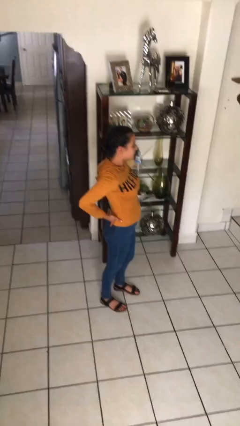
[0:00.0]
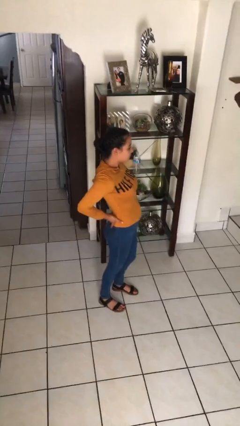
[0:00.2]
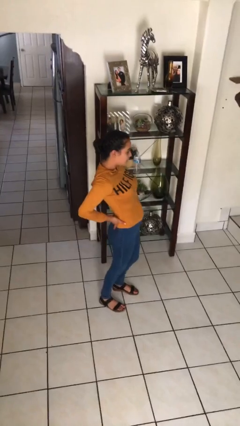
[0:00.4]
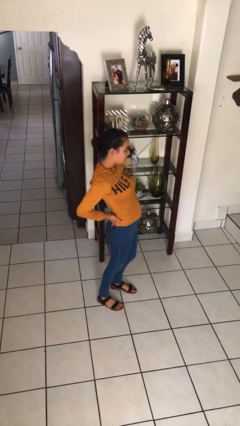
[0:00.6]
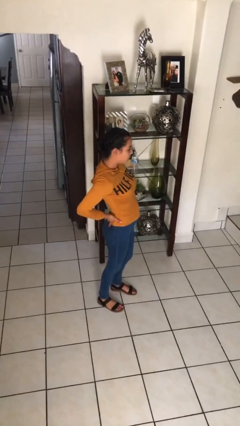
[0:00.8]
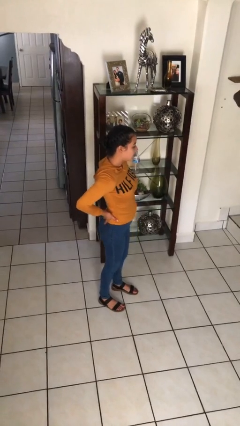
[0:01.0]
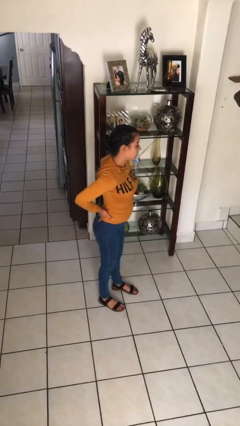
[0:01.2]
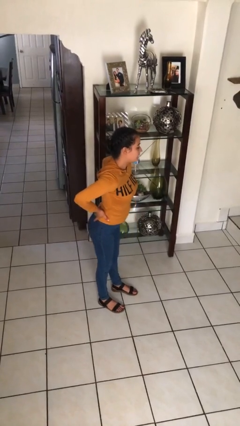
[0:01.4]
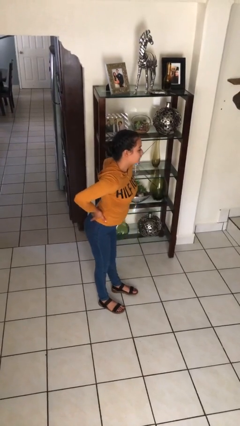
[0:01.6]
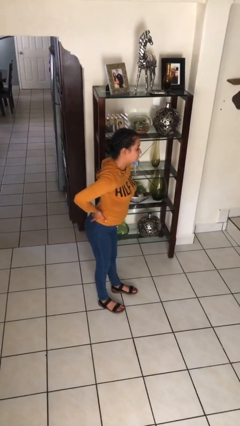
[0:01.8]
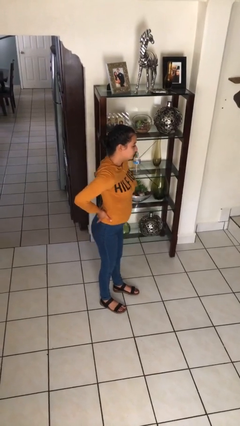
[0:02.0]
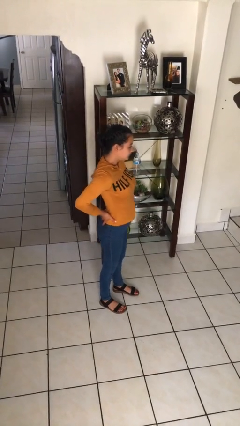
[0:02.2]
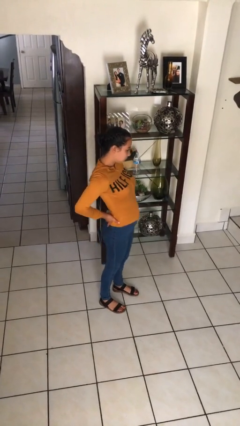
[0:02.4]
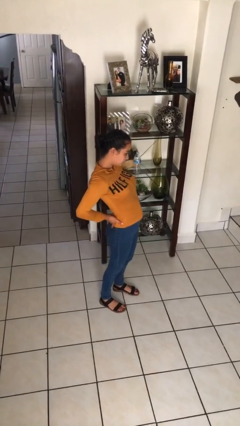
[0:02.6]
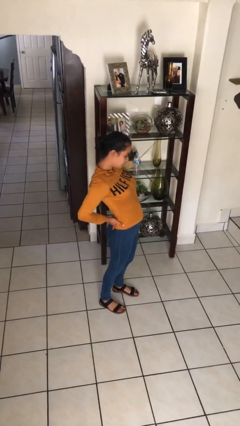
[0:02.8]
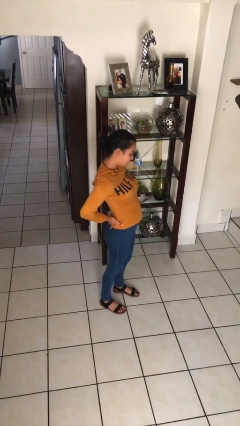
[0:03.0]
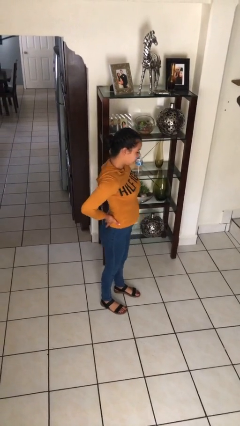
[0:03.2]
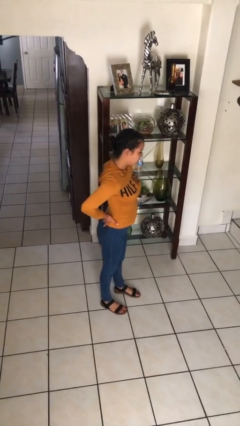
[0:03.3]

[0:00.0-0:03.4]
person wiggles hips

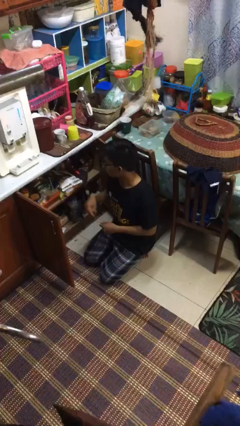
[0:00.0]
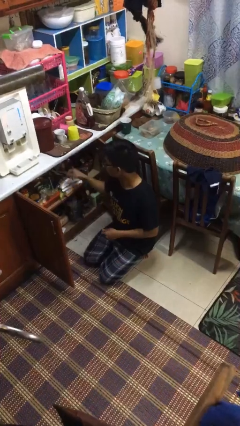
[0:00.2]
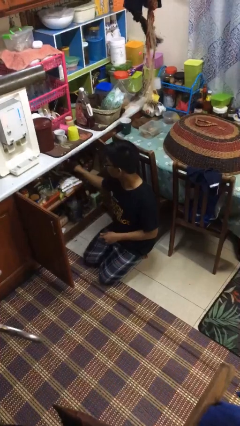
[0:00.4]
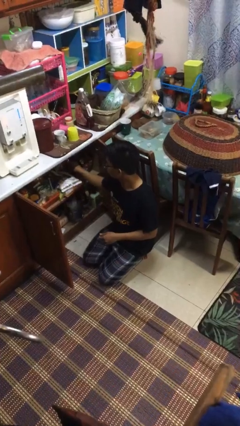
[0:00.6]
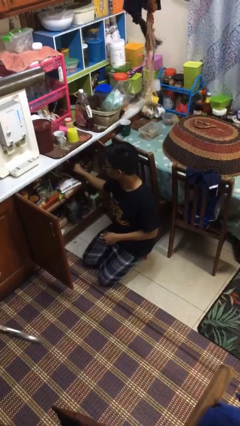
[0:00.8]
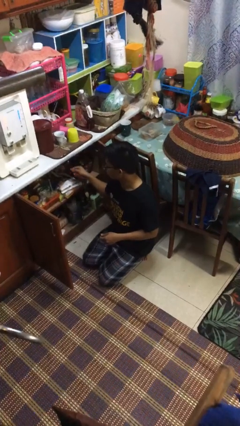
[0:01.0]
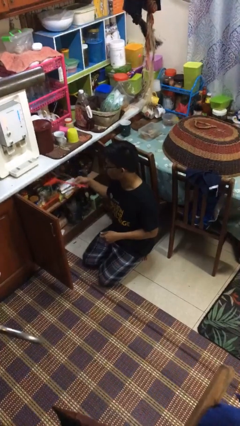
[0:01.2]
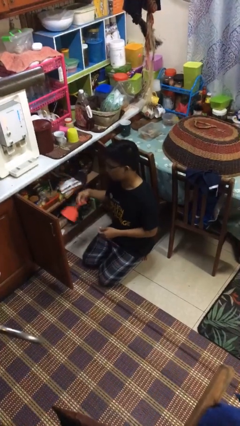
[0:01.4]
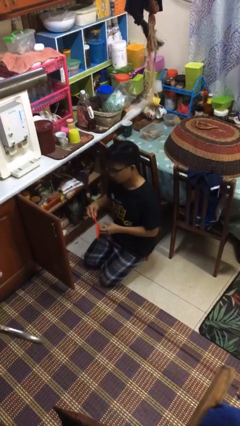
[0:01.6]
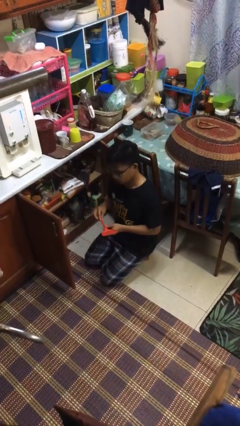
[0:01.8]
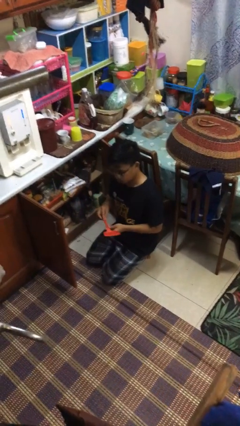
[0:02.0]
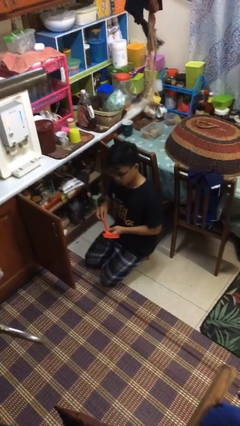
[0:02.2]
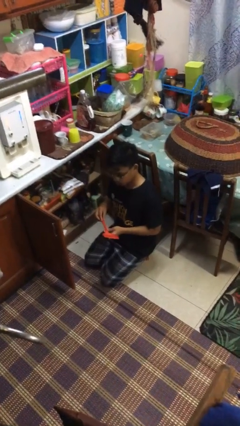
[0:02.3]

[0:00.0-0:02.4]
person takes object from kitchen drawer

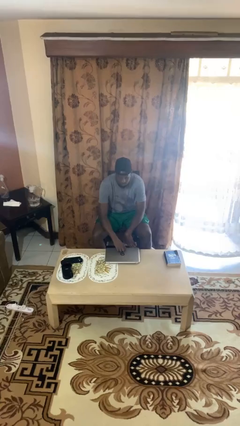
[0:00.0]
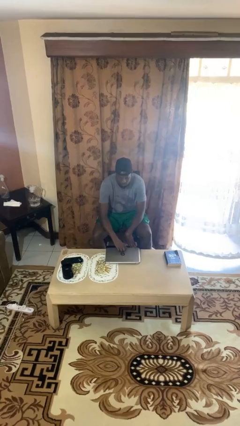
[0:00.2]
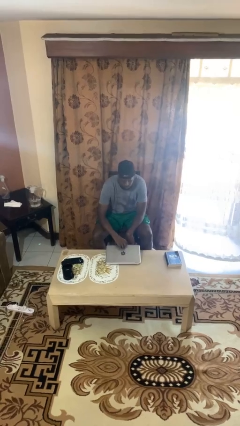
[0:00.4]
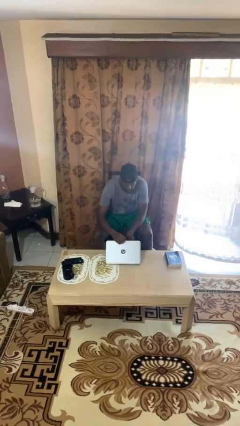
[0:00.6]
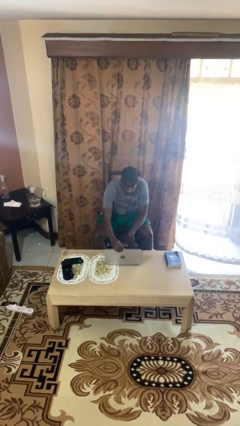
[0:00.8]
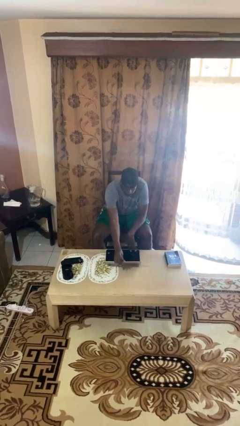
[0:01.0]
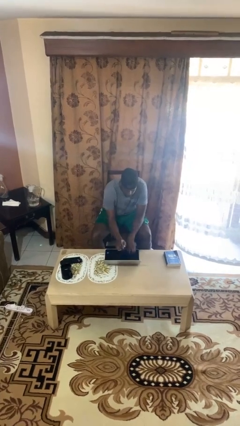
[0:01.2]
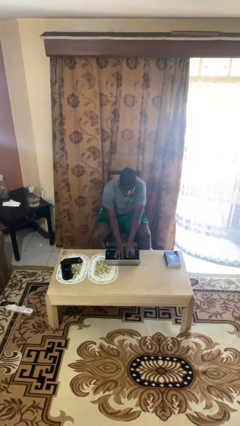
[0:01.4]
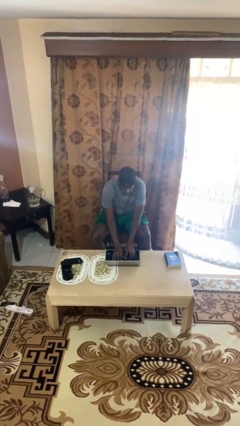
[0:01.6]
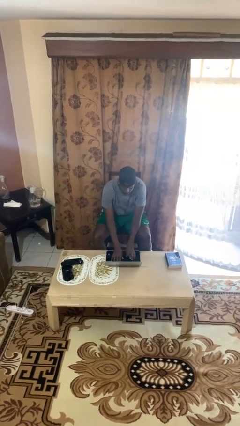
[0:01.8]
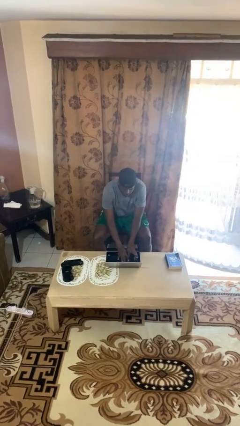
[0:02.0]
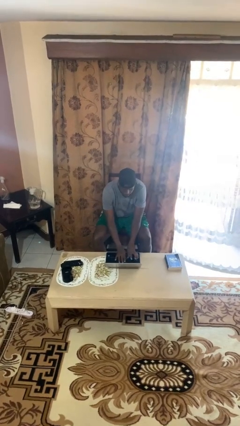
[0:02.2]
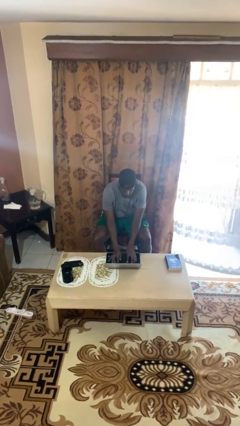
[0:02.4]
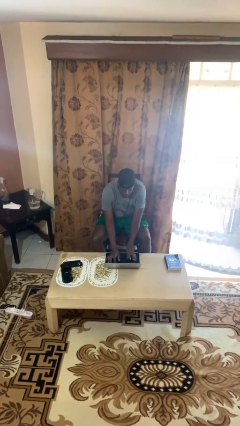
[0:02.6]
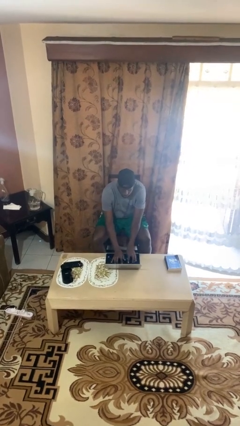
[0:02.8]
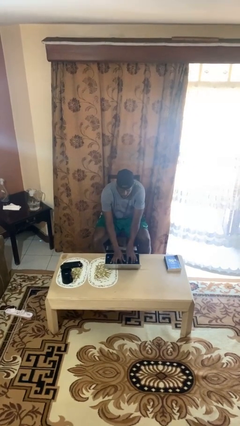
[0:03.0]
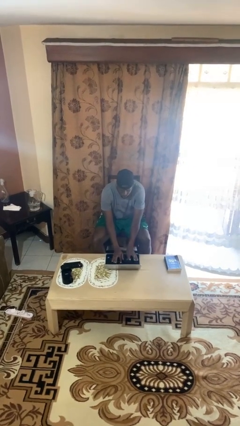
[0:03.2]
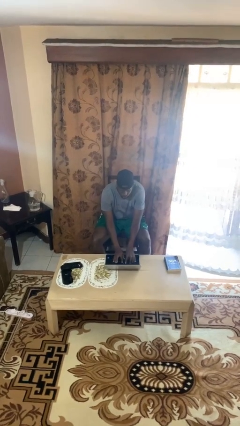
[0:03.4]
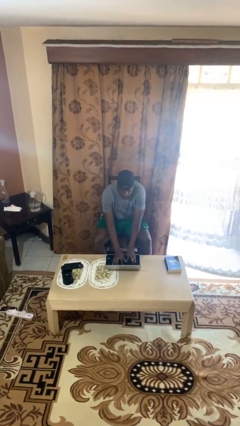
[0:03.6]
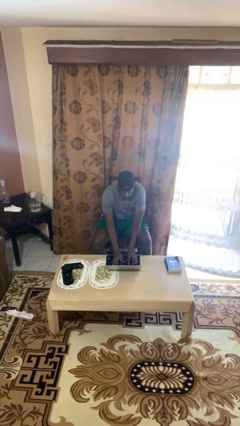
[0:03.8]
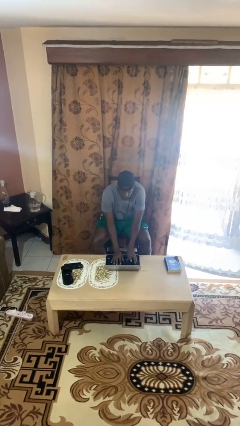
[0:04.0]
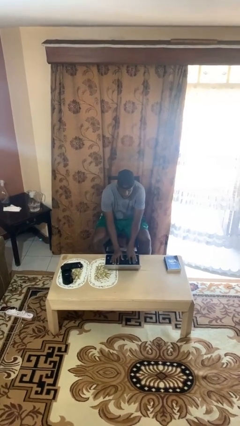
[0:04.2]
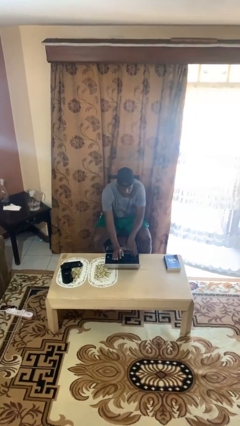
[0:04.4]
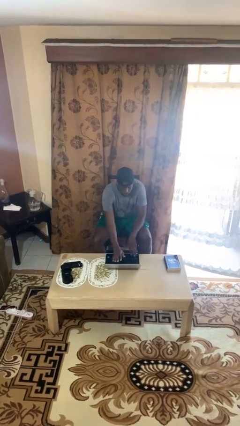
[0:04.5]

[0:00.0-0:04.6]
person interacts with laptop

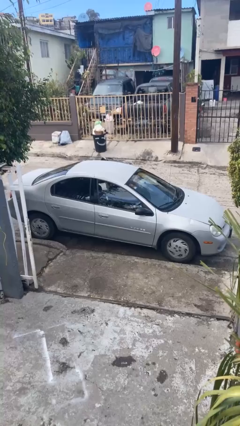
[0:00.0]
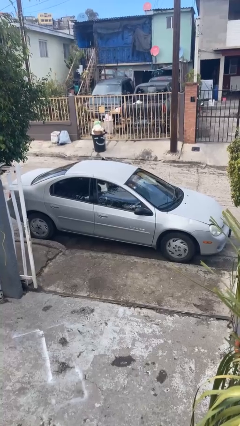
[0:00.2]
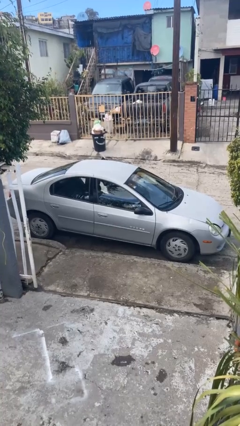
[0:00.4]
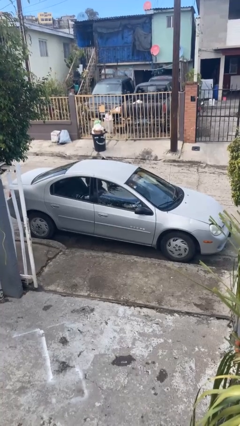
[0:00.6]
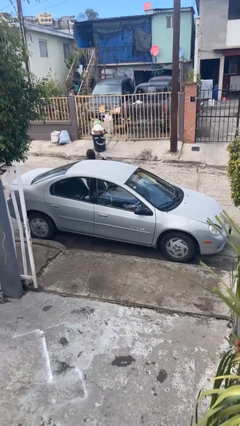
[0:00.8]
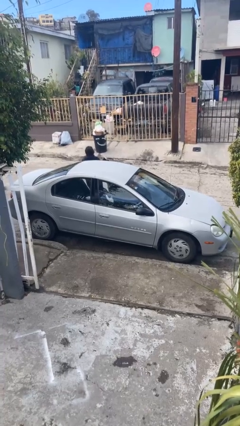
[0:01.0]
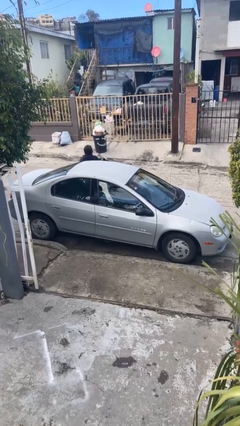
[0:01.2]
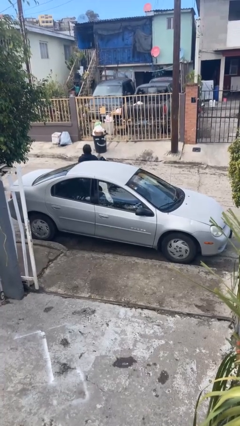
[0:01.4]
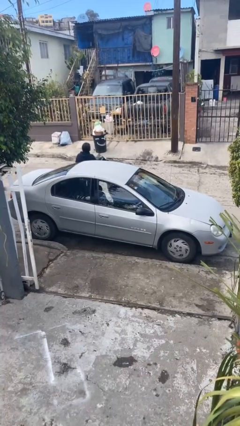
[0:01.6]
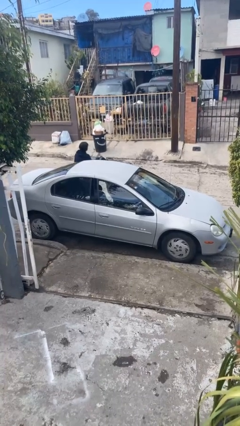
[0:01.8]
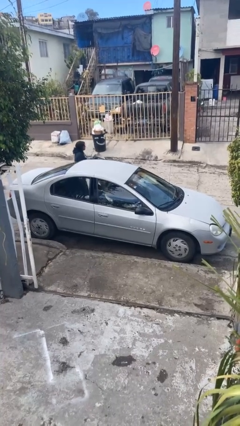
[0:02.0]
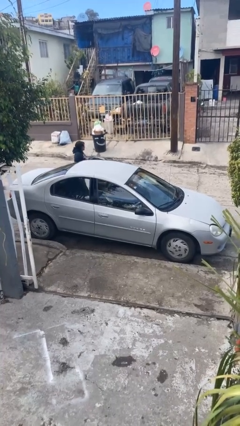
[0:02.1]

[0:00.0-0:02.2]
car drops off person

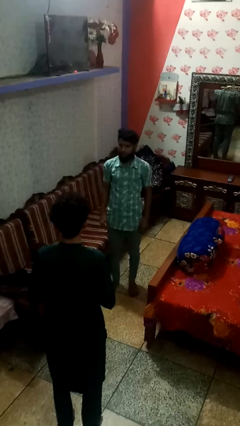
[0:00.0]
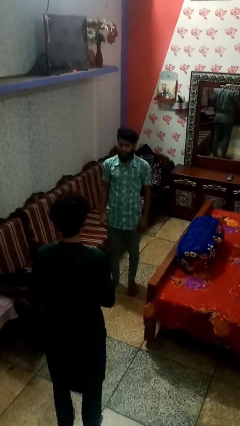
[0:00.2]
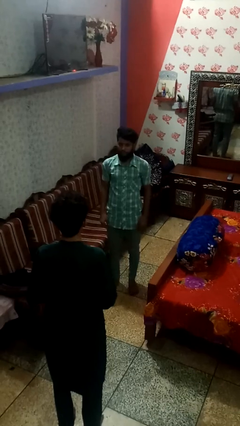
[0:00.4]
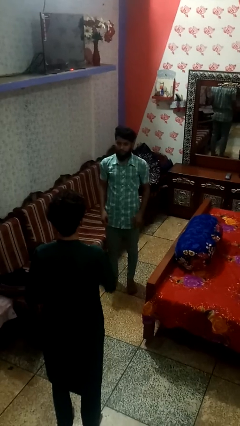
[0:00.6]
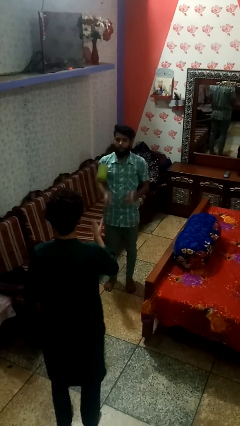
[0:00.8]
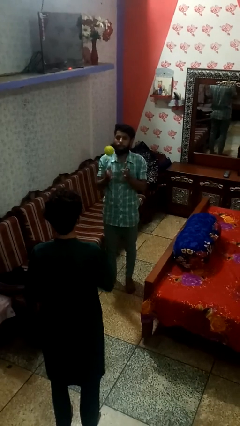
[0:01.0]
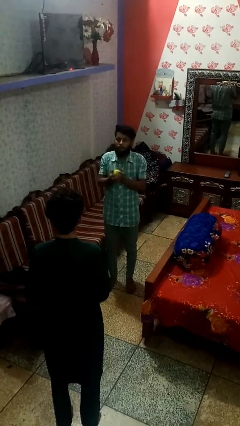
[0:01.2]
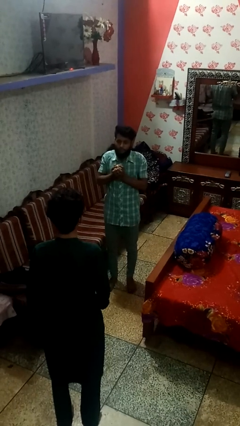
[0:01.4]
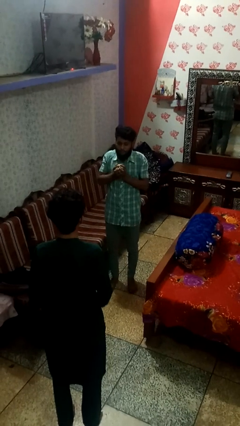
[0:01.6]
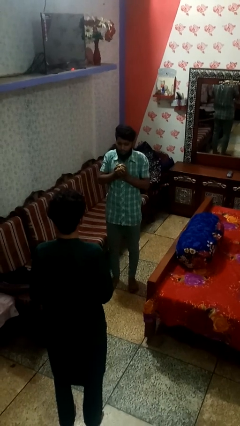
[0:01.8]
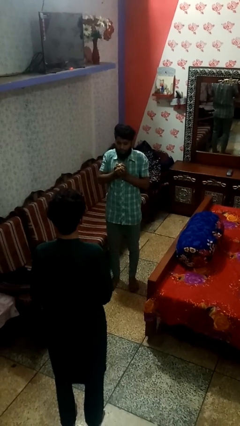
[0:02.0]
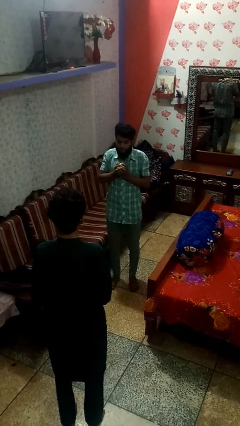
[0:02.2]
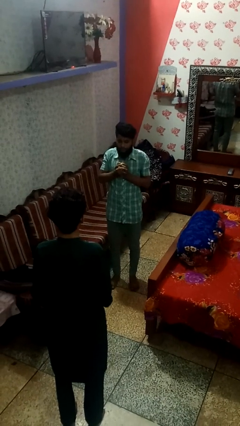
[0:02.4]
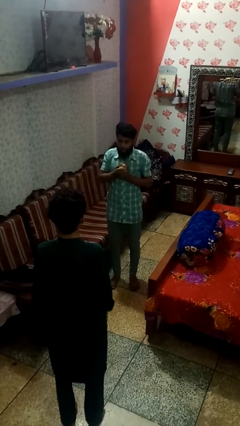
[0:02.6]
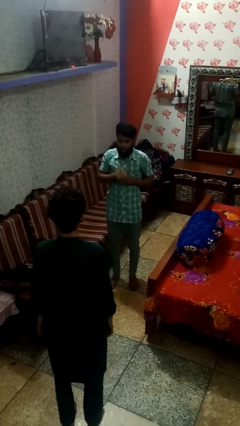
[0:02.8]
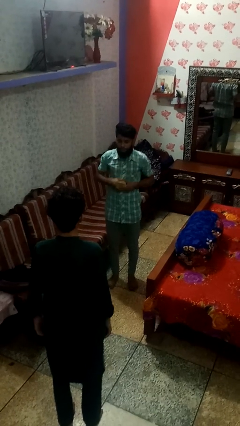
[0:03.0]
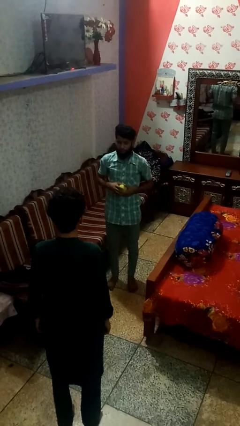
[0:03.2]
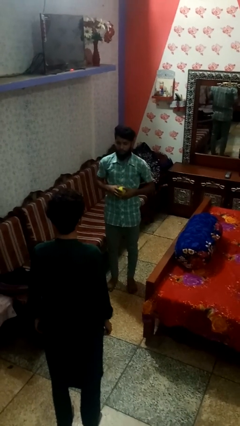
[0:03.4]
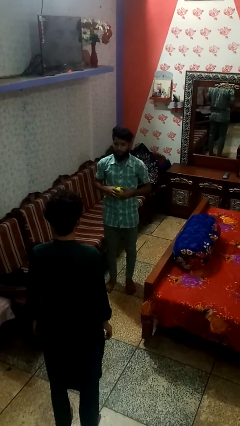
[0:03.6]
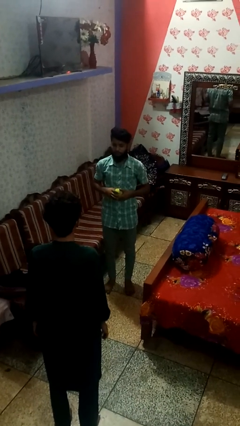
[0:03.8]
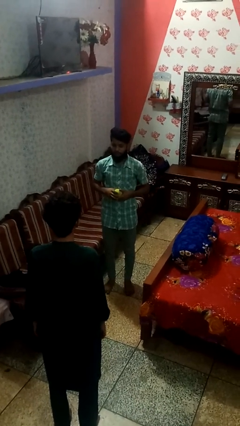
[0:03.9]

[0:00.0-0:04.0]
person catches object from person

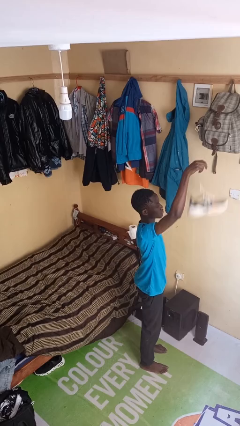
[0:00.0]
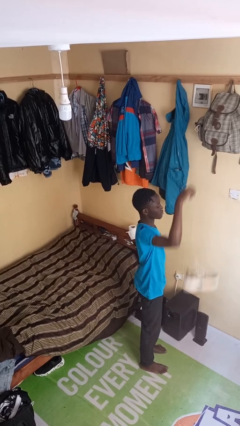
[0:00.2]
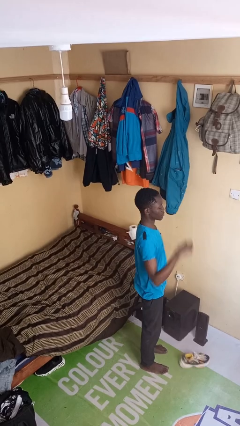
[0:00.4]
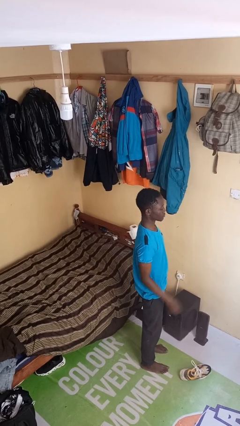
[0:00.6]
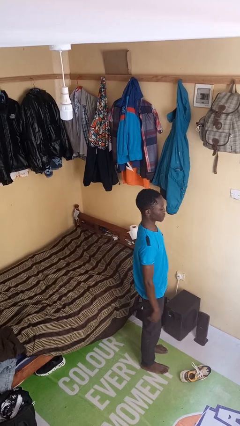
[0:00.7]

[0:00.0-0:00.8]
person drops object

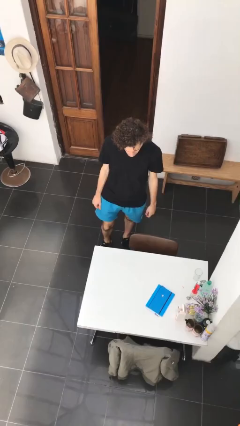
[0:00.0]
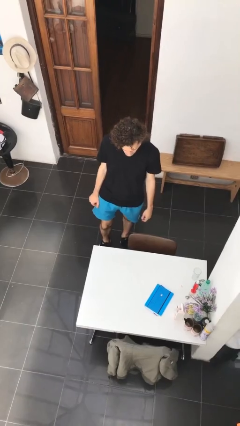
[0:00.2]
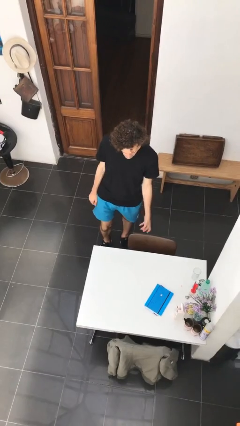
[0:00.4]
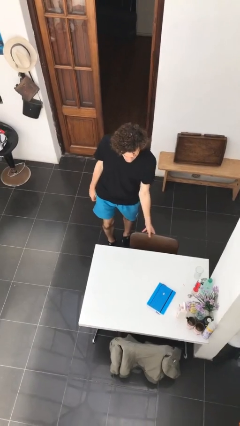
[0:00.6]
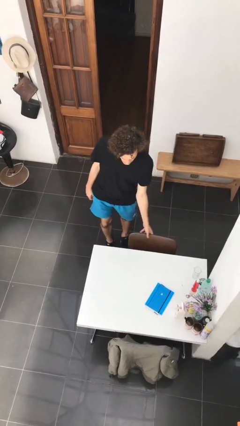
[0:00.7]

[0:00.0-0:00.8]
person stands up
